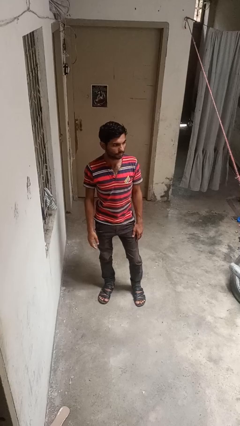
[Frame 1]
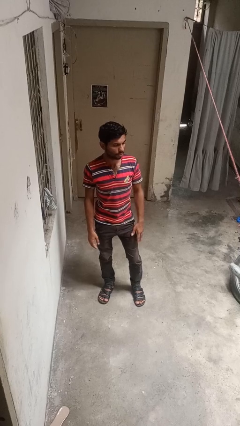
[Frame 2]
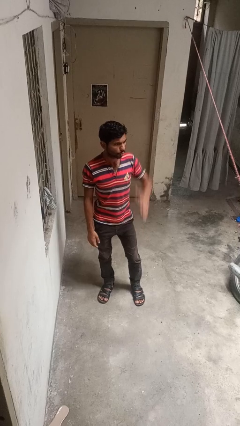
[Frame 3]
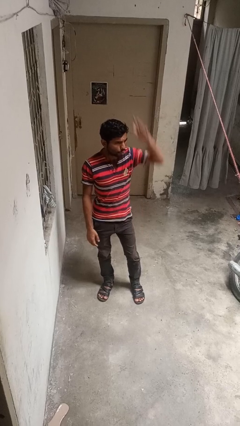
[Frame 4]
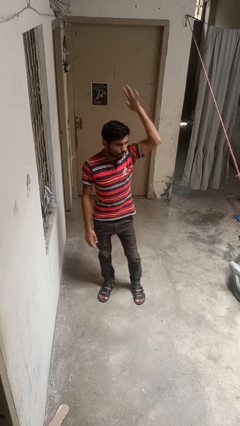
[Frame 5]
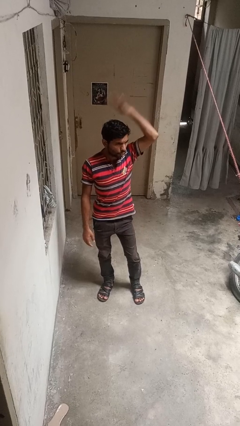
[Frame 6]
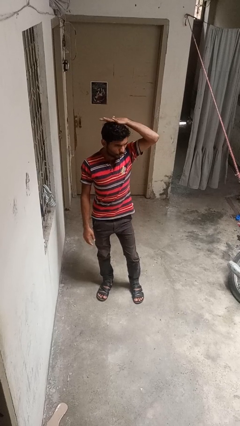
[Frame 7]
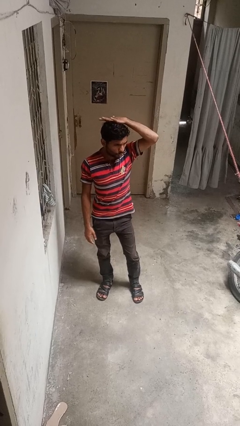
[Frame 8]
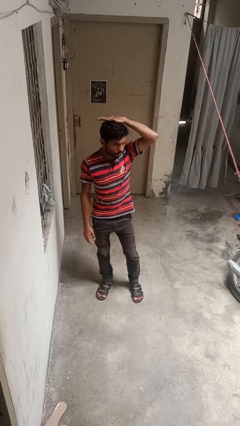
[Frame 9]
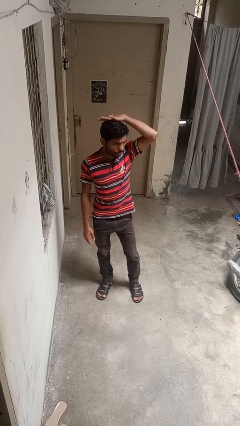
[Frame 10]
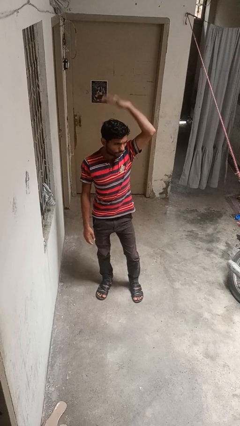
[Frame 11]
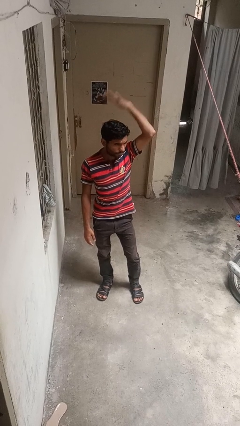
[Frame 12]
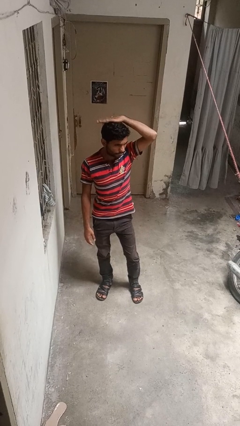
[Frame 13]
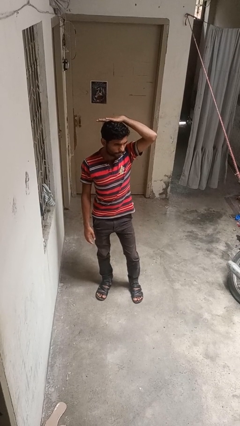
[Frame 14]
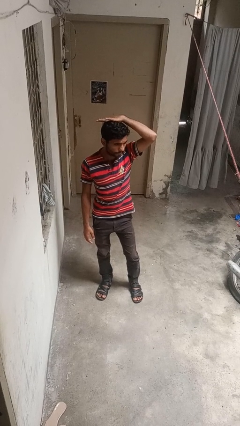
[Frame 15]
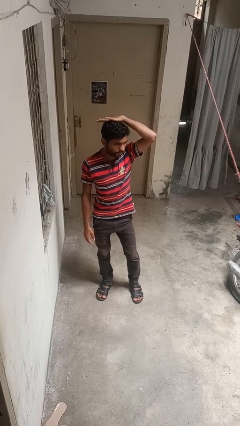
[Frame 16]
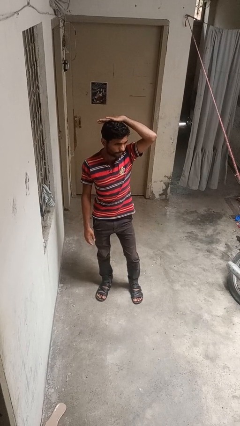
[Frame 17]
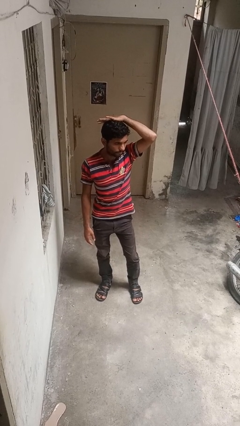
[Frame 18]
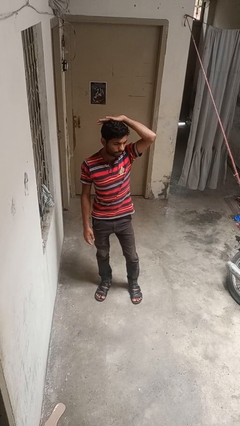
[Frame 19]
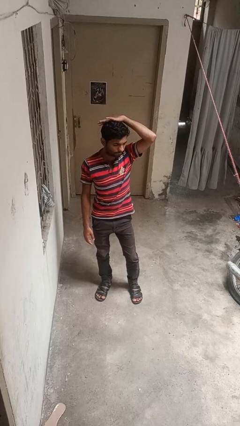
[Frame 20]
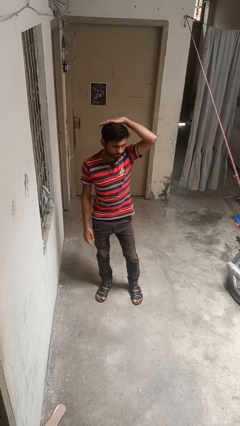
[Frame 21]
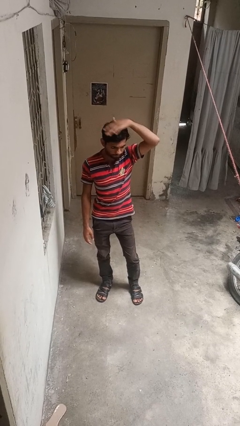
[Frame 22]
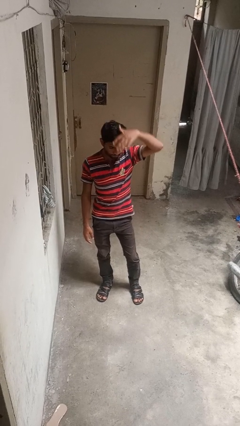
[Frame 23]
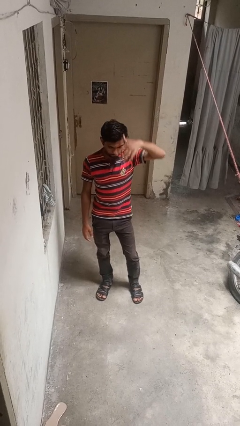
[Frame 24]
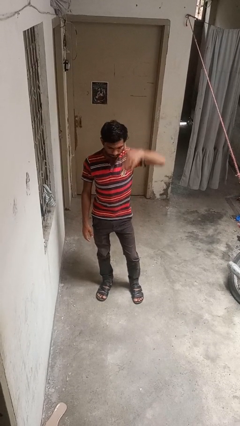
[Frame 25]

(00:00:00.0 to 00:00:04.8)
person pats head

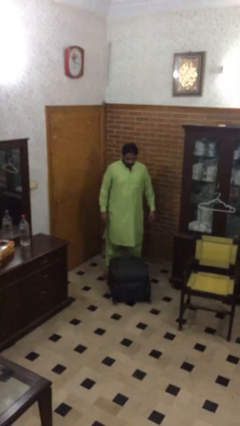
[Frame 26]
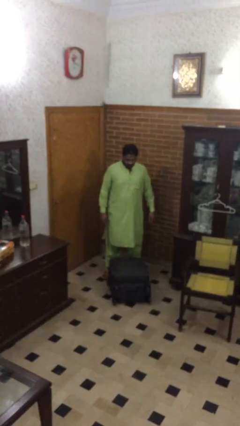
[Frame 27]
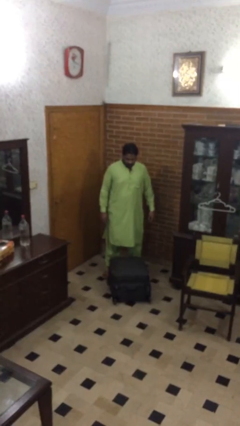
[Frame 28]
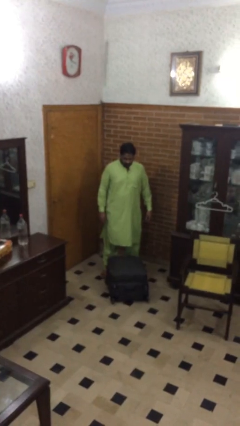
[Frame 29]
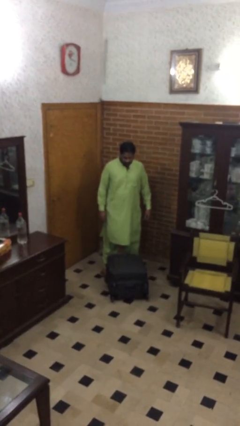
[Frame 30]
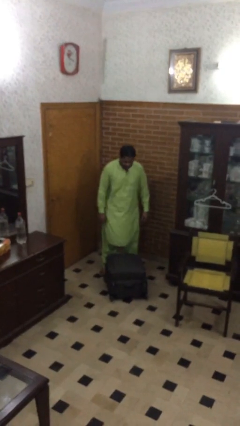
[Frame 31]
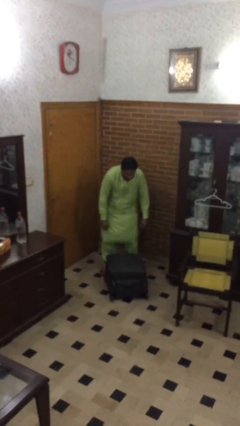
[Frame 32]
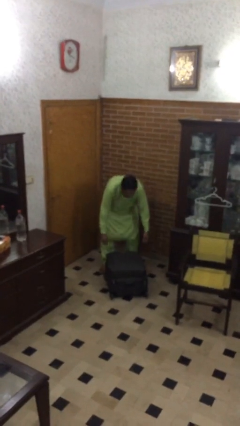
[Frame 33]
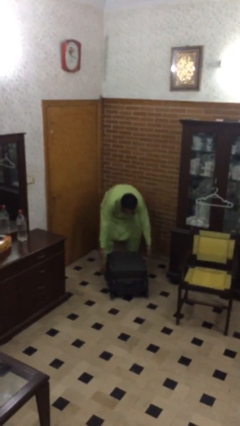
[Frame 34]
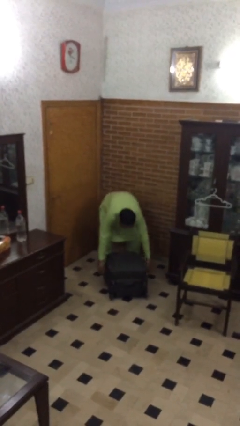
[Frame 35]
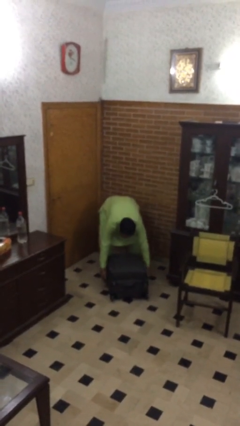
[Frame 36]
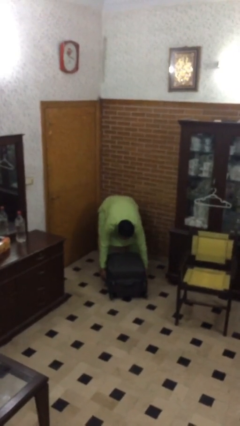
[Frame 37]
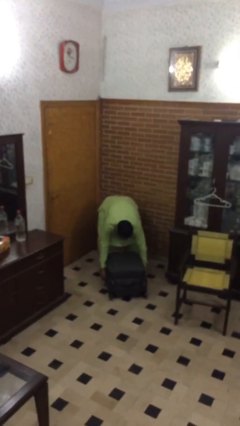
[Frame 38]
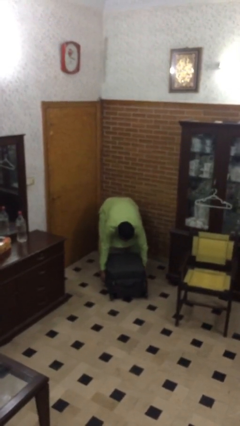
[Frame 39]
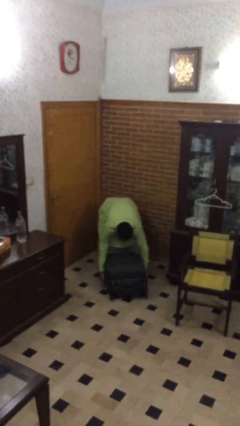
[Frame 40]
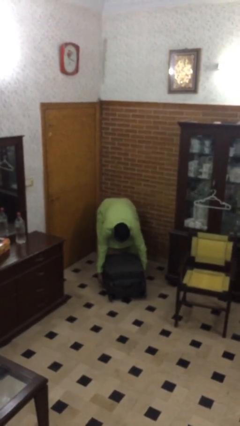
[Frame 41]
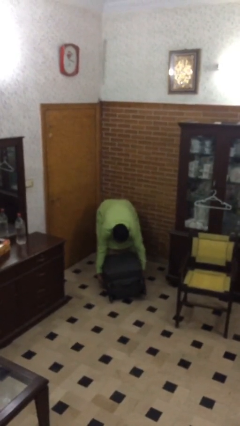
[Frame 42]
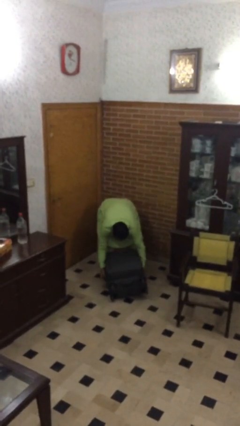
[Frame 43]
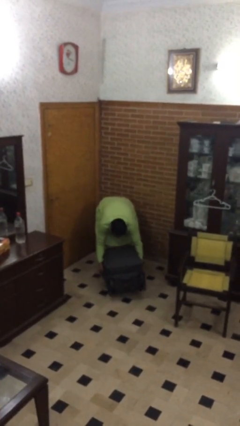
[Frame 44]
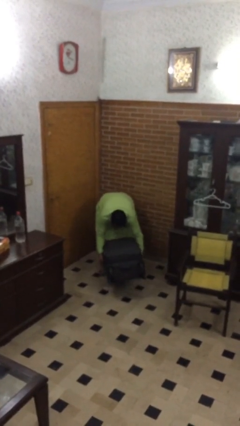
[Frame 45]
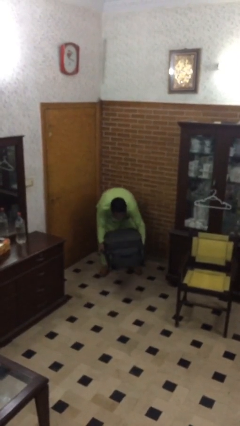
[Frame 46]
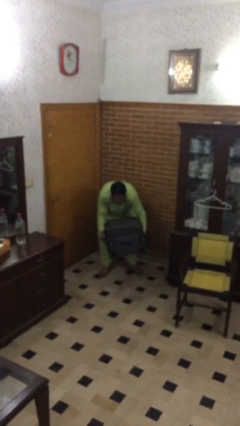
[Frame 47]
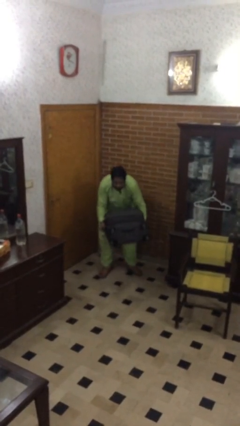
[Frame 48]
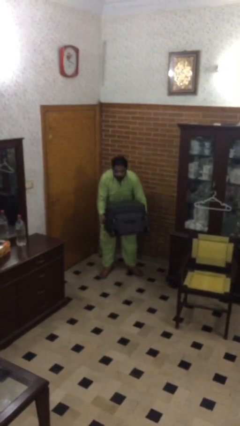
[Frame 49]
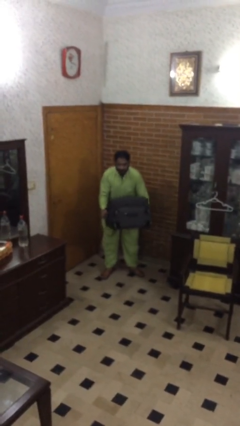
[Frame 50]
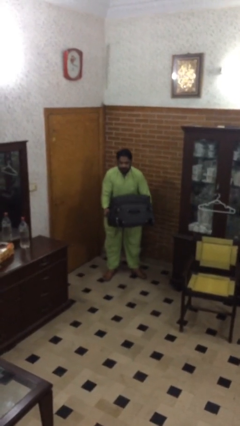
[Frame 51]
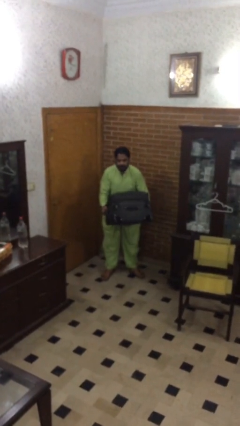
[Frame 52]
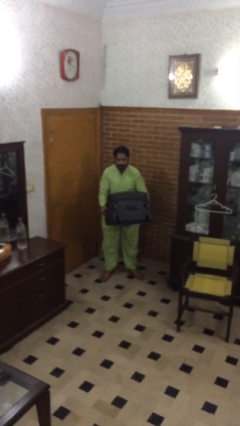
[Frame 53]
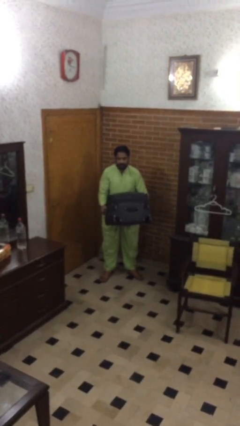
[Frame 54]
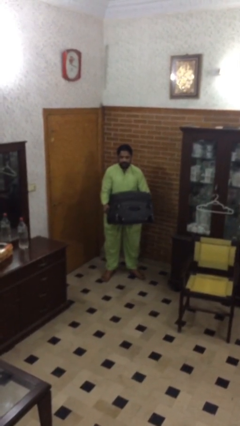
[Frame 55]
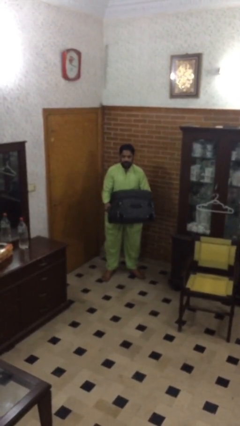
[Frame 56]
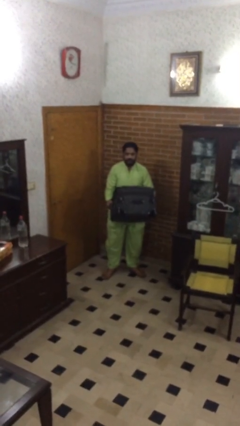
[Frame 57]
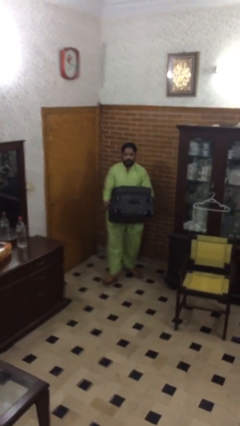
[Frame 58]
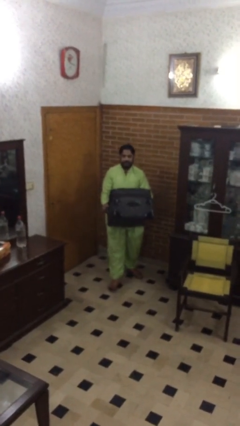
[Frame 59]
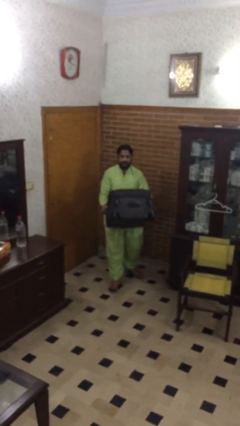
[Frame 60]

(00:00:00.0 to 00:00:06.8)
person picks up object from floor

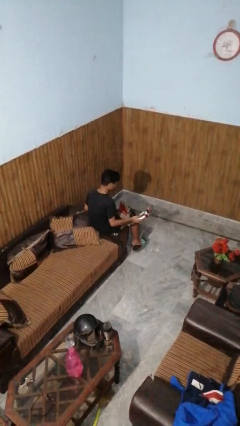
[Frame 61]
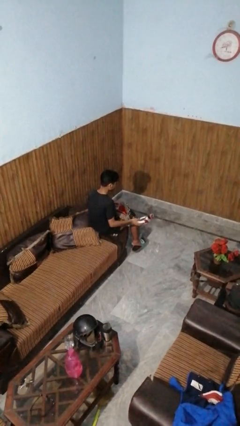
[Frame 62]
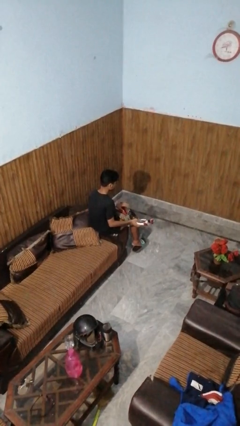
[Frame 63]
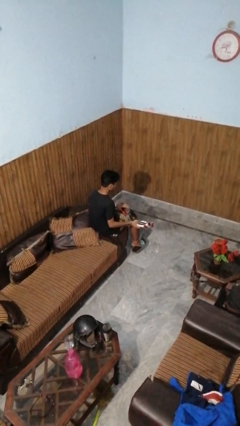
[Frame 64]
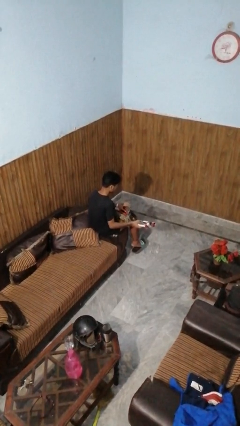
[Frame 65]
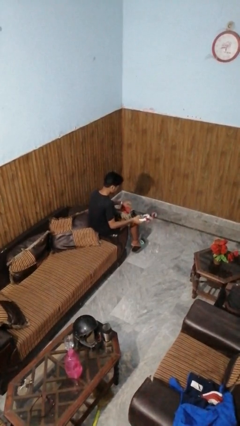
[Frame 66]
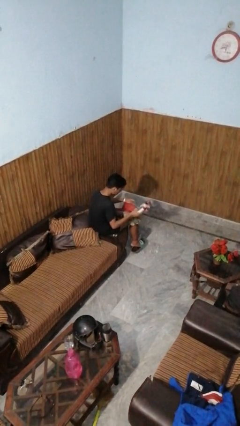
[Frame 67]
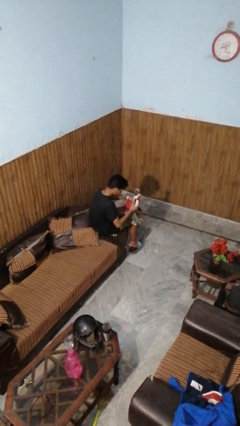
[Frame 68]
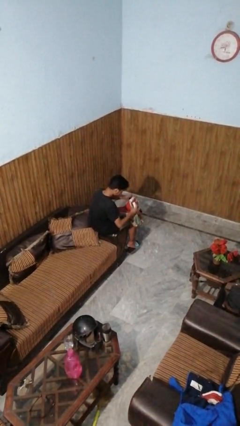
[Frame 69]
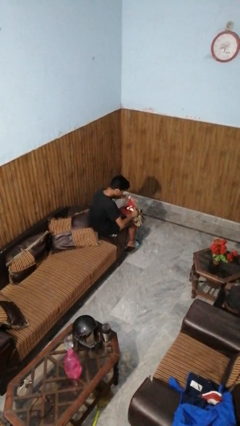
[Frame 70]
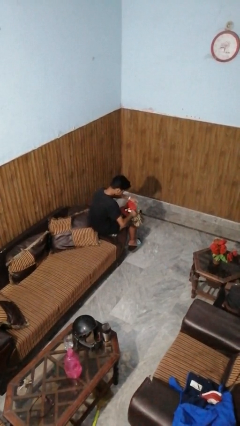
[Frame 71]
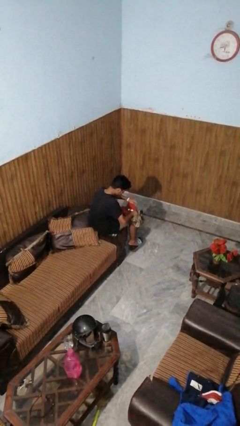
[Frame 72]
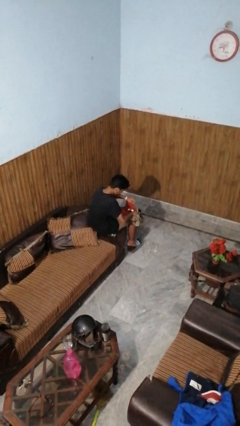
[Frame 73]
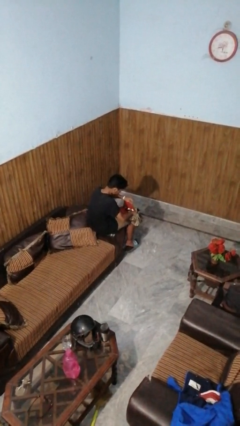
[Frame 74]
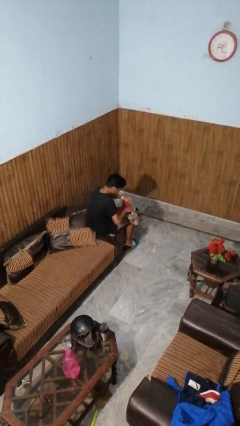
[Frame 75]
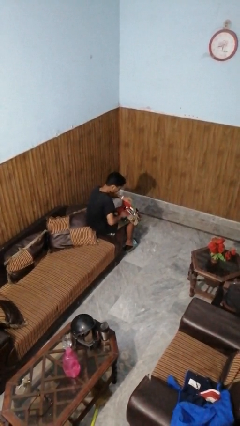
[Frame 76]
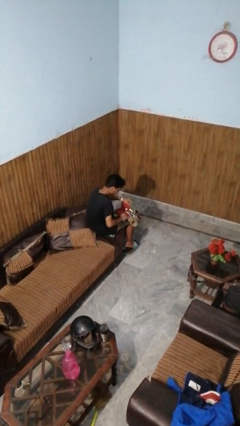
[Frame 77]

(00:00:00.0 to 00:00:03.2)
person puts object into purse

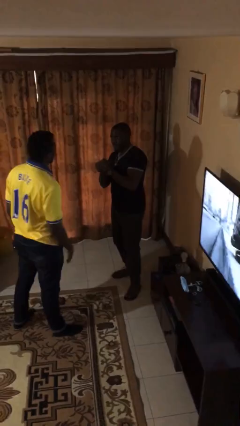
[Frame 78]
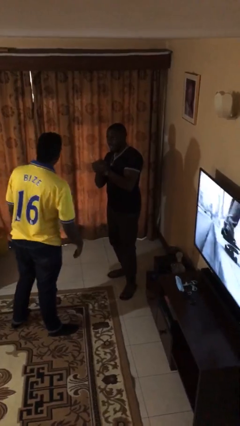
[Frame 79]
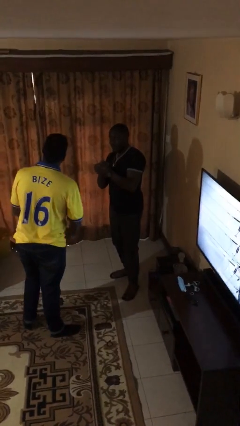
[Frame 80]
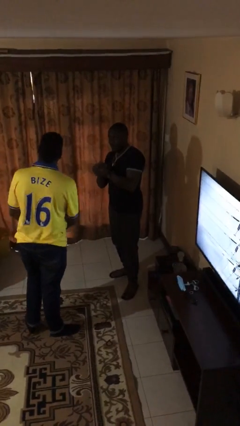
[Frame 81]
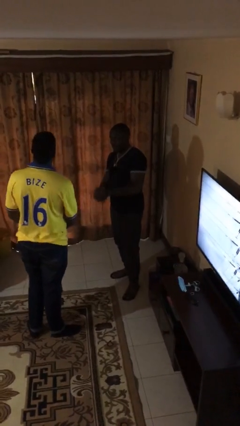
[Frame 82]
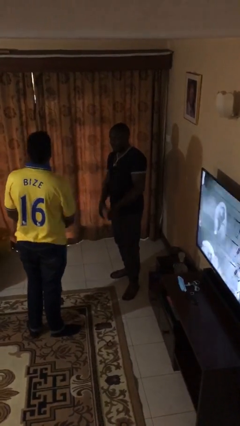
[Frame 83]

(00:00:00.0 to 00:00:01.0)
person bumps into person

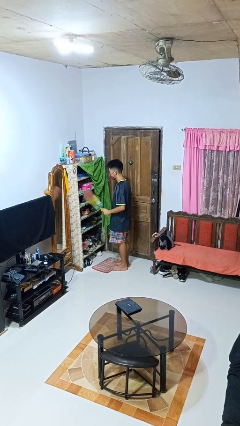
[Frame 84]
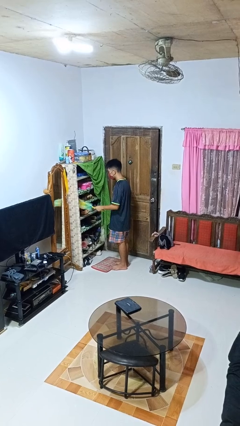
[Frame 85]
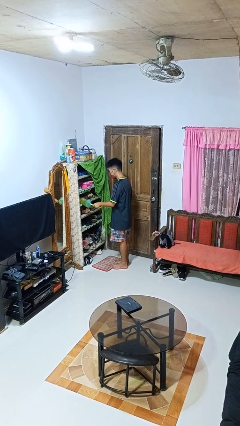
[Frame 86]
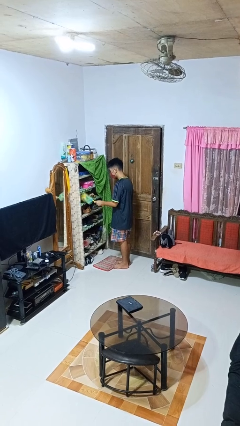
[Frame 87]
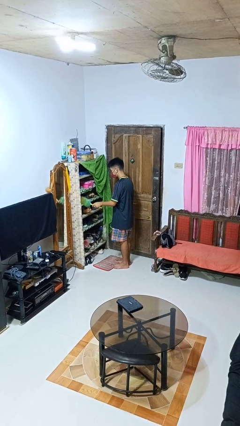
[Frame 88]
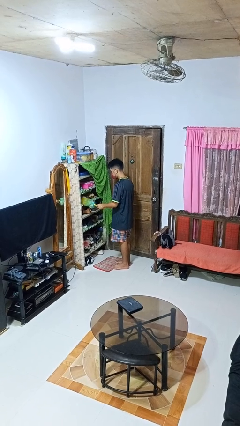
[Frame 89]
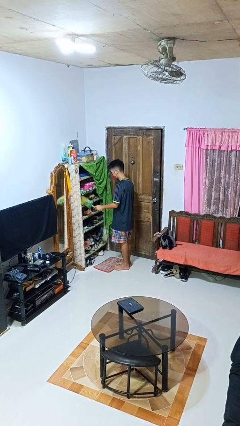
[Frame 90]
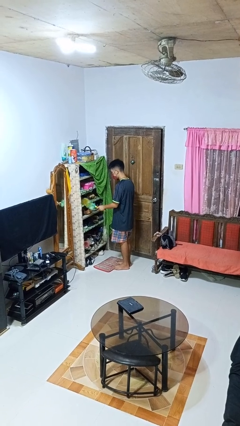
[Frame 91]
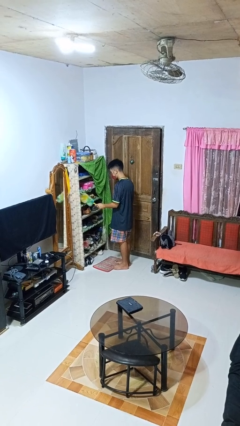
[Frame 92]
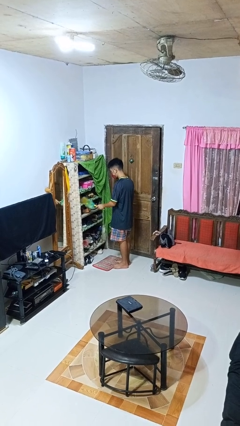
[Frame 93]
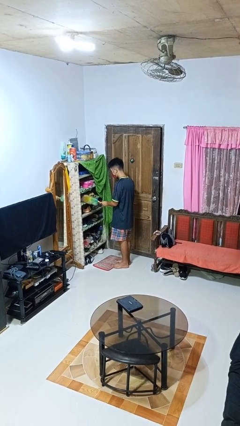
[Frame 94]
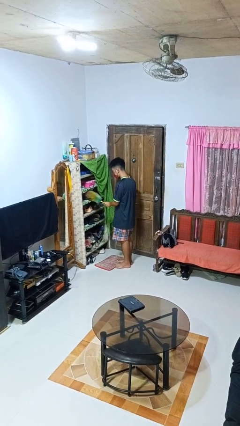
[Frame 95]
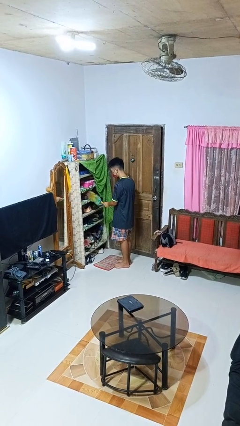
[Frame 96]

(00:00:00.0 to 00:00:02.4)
person dusts furniture
